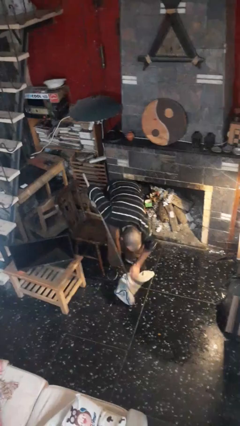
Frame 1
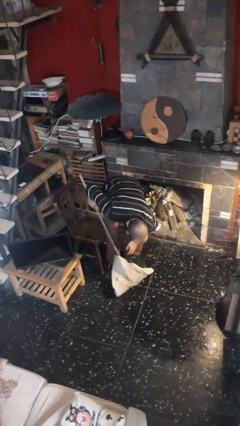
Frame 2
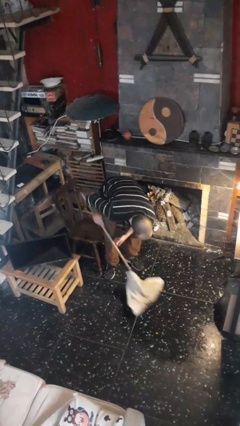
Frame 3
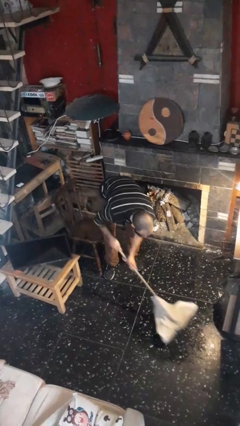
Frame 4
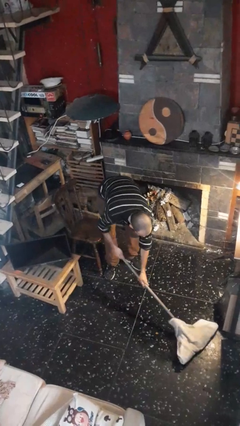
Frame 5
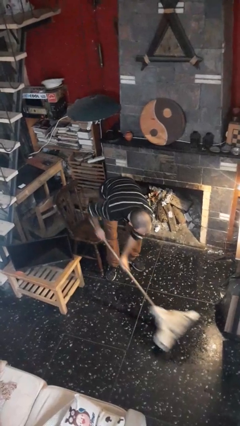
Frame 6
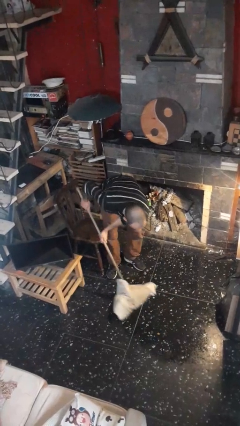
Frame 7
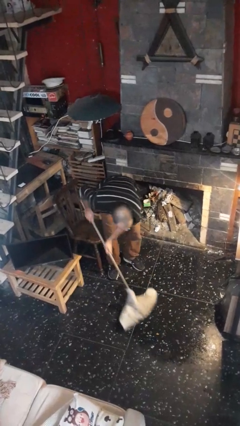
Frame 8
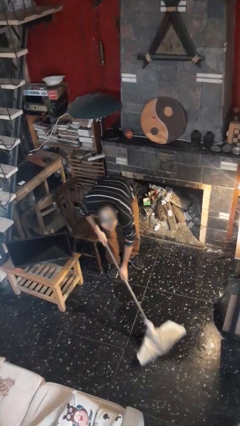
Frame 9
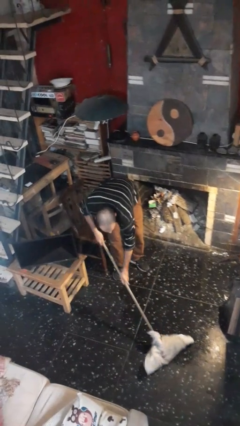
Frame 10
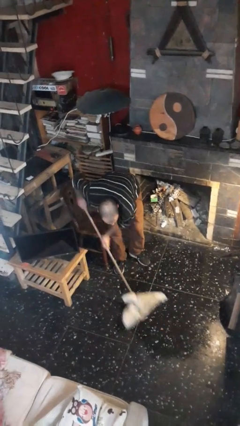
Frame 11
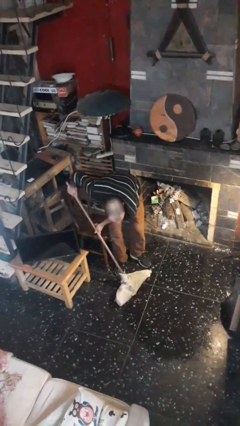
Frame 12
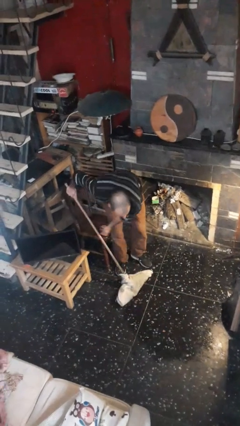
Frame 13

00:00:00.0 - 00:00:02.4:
person mops

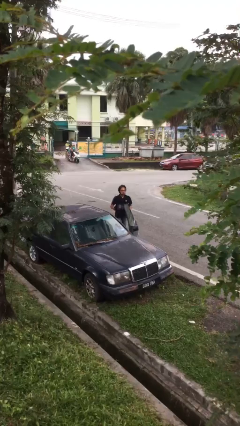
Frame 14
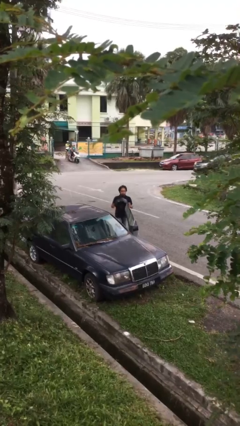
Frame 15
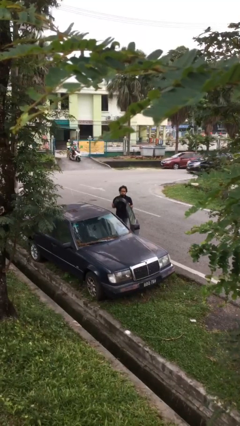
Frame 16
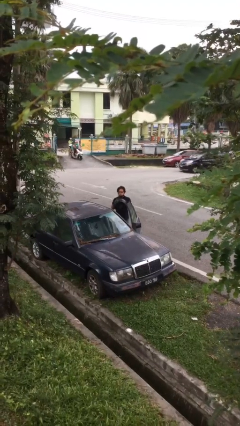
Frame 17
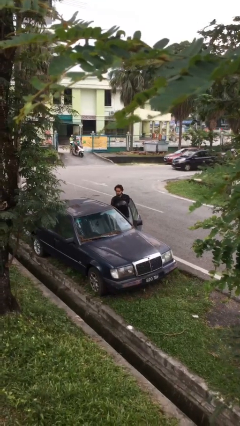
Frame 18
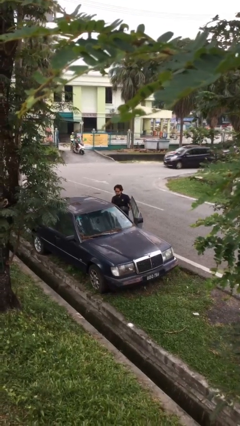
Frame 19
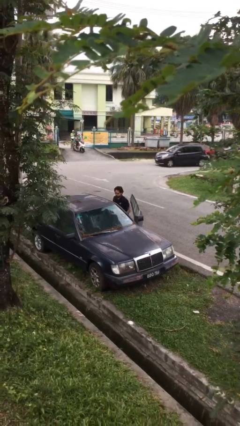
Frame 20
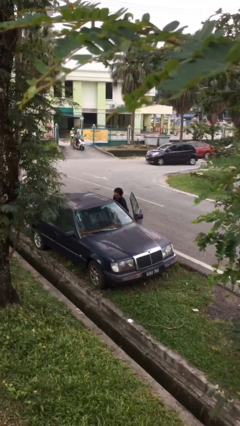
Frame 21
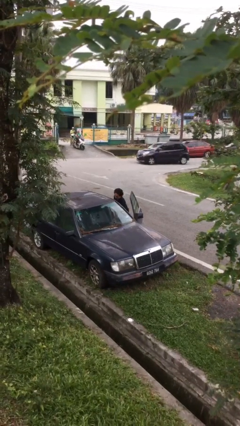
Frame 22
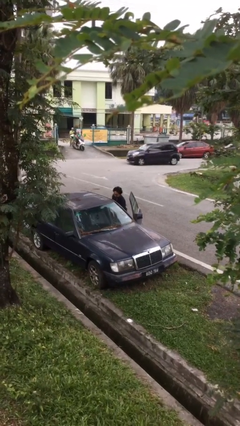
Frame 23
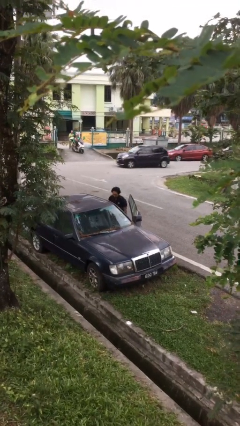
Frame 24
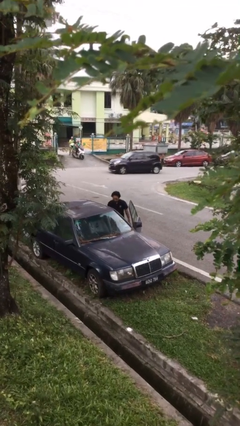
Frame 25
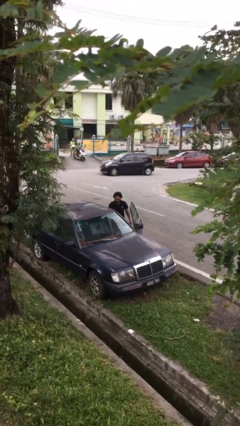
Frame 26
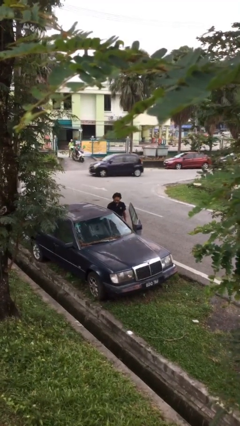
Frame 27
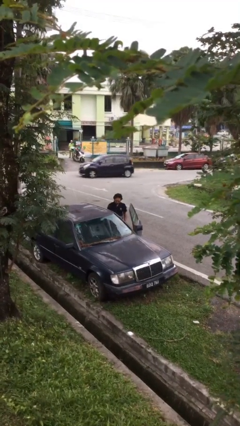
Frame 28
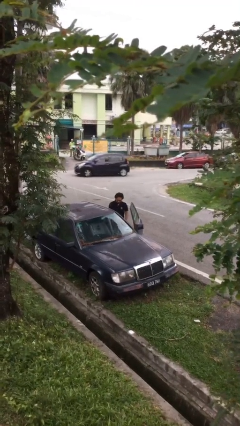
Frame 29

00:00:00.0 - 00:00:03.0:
person loads car

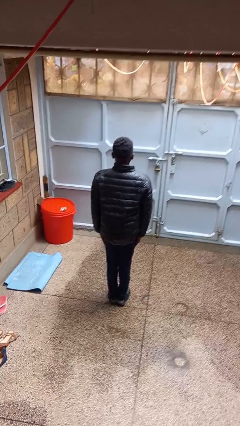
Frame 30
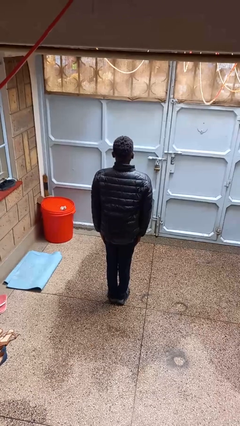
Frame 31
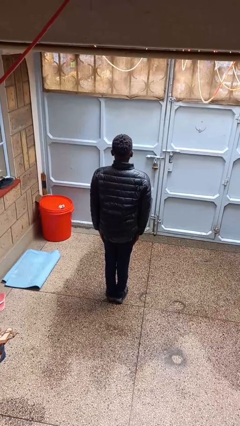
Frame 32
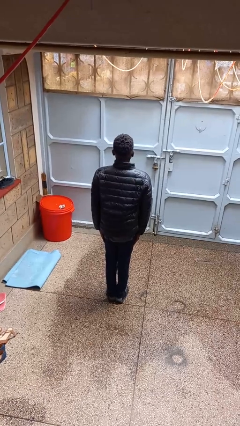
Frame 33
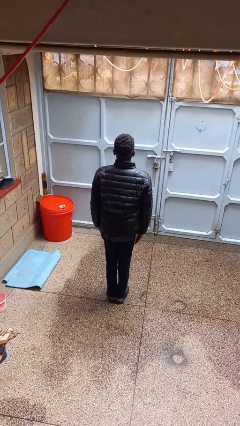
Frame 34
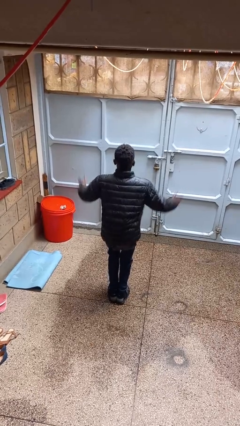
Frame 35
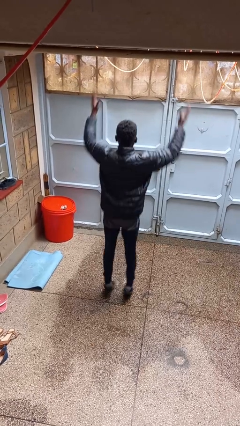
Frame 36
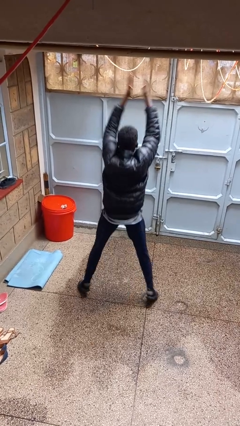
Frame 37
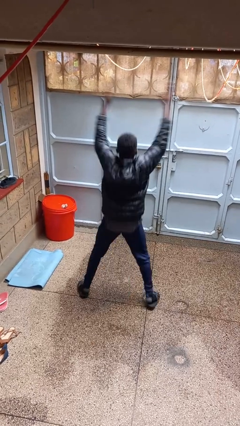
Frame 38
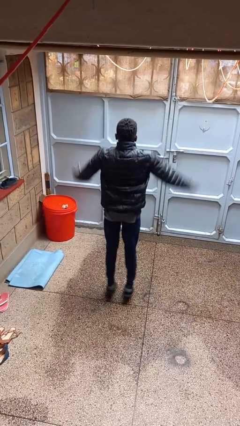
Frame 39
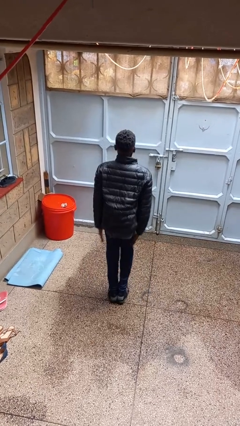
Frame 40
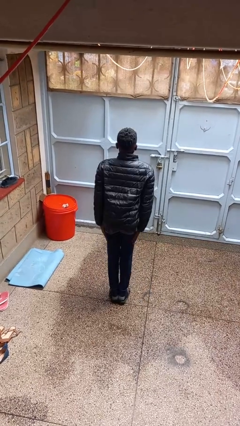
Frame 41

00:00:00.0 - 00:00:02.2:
person exercises with jumping jacks

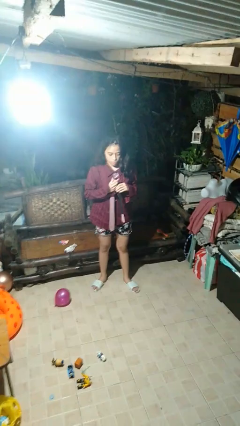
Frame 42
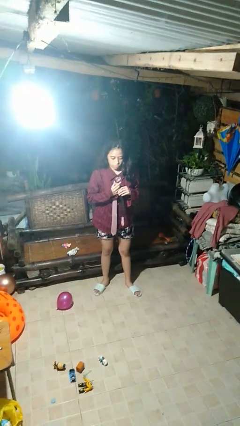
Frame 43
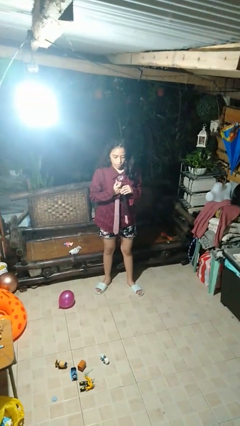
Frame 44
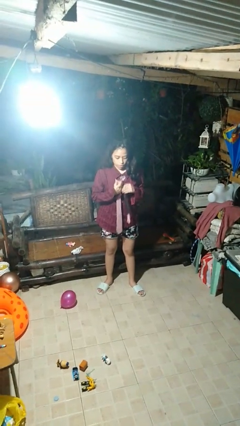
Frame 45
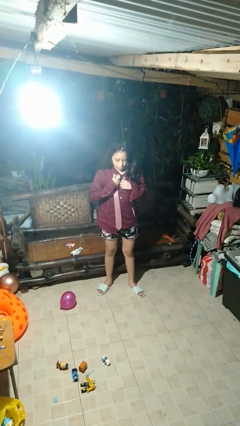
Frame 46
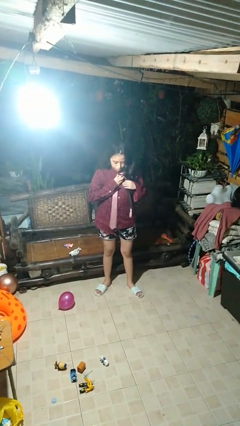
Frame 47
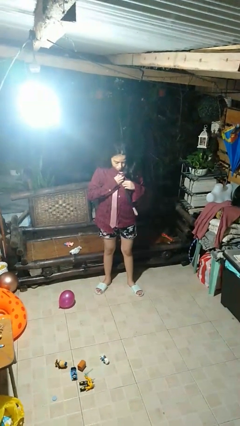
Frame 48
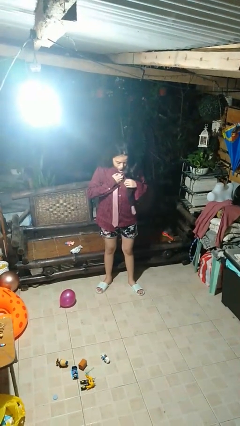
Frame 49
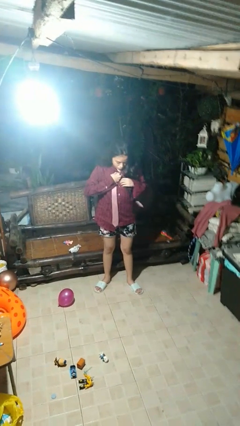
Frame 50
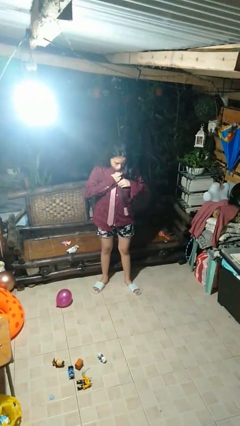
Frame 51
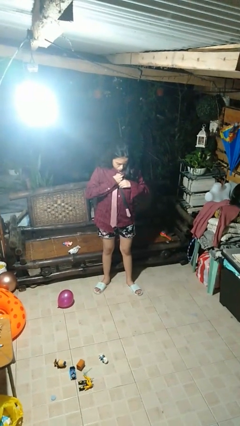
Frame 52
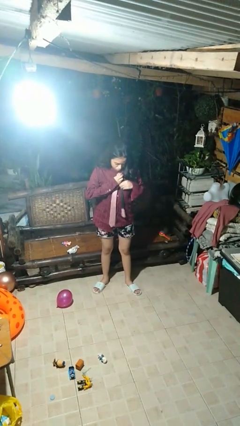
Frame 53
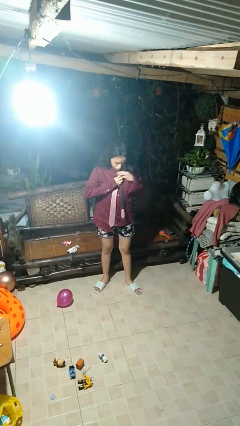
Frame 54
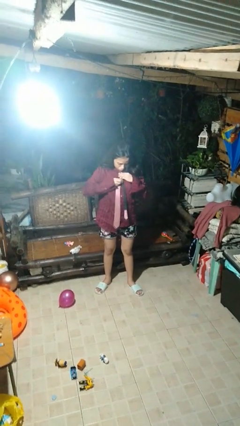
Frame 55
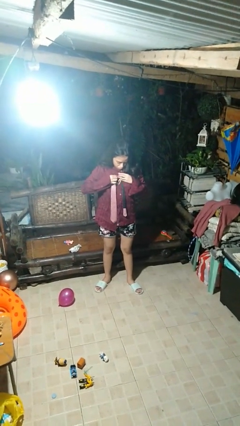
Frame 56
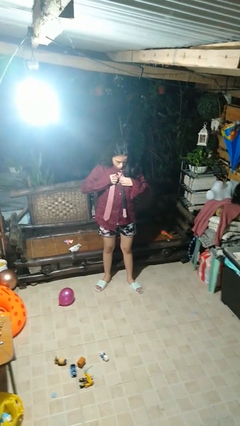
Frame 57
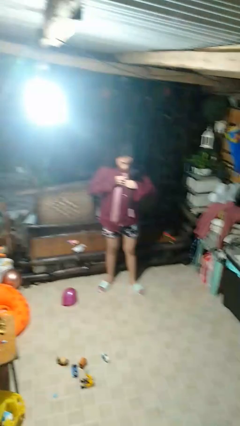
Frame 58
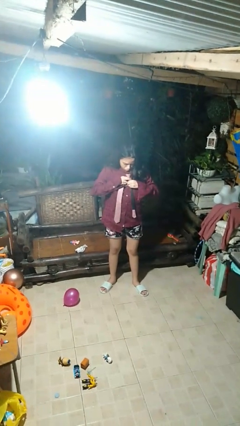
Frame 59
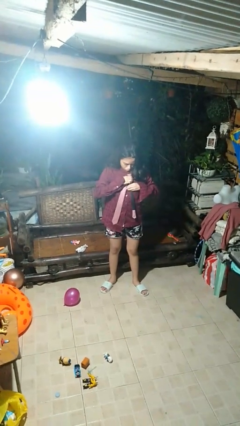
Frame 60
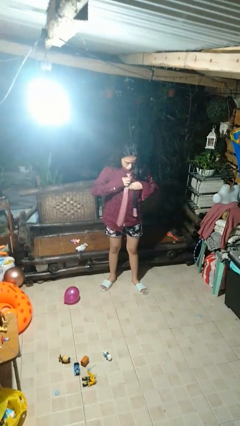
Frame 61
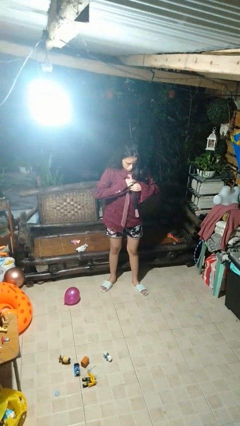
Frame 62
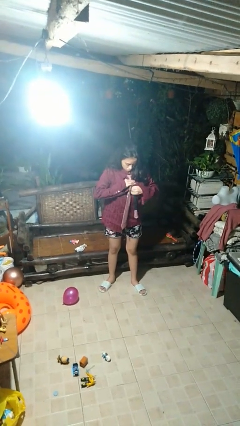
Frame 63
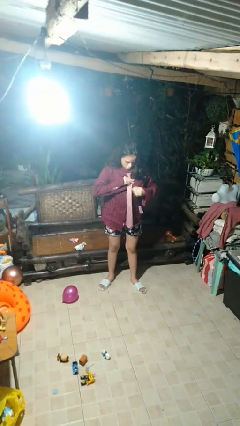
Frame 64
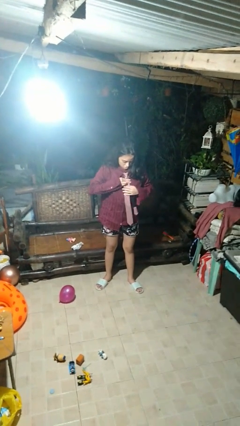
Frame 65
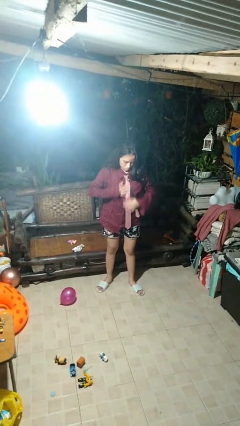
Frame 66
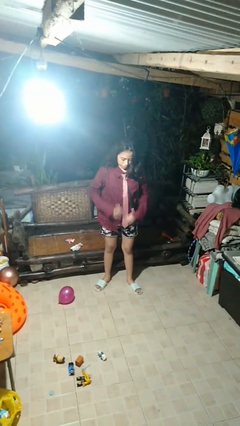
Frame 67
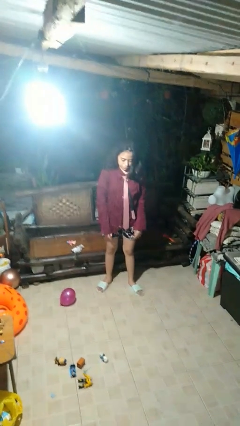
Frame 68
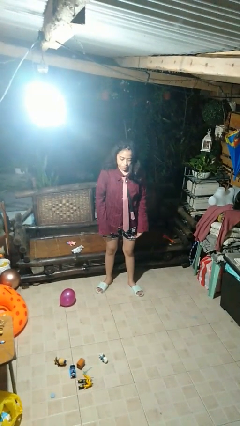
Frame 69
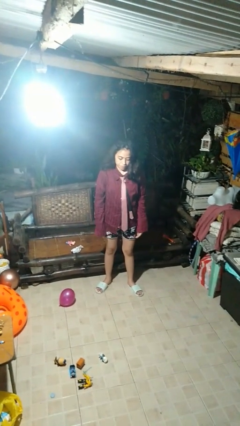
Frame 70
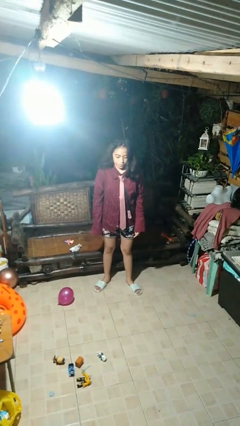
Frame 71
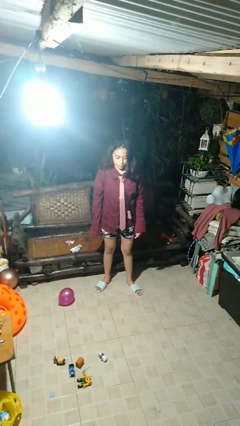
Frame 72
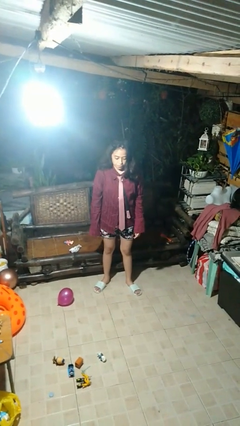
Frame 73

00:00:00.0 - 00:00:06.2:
person puts on necktie

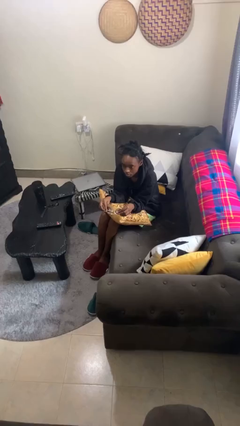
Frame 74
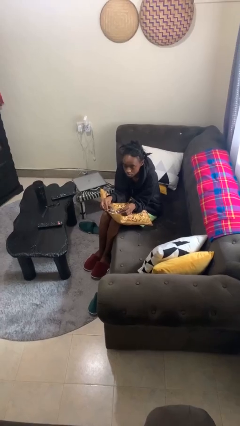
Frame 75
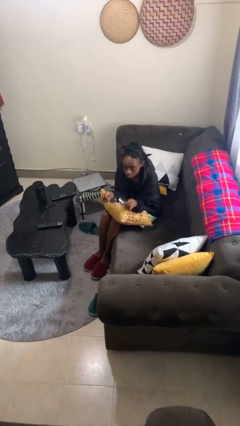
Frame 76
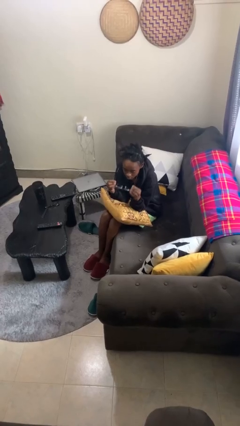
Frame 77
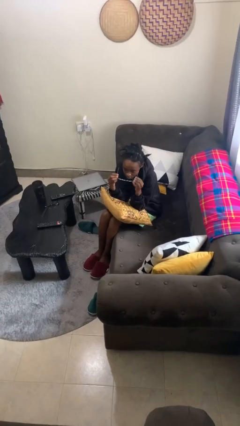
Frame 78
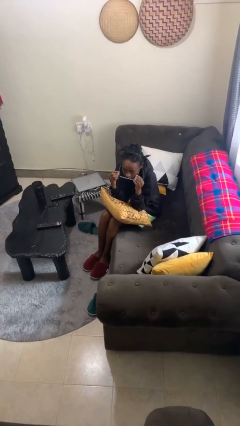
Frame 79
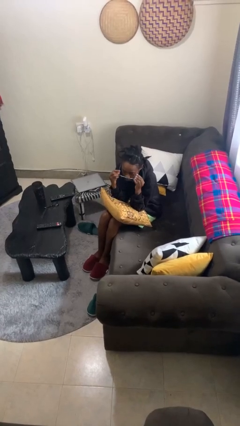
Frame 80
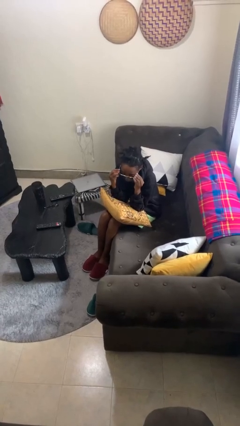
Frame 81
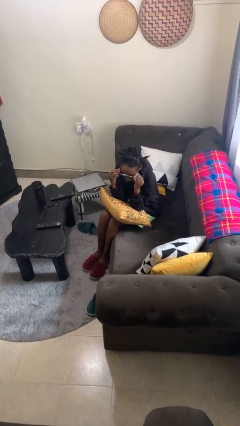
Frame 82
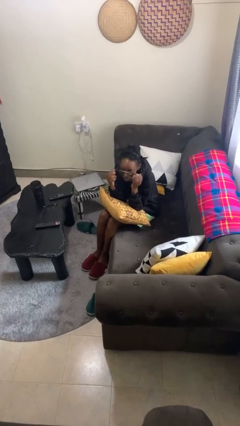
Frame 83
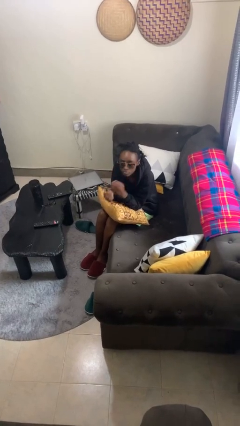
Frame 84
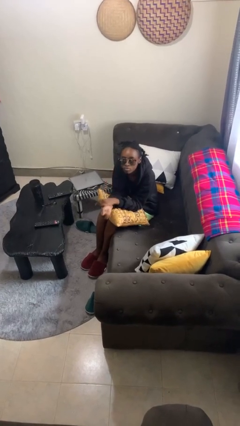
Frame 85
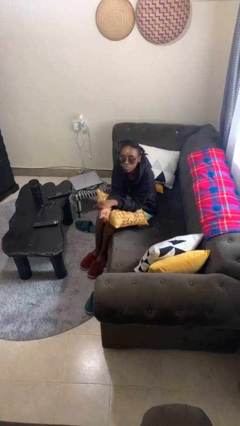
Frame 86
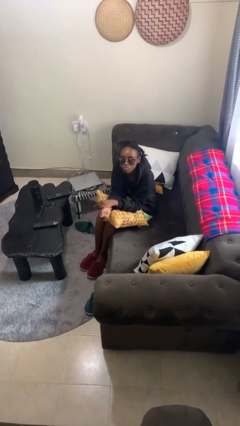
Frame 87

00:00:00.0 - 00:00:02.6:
person puts on sunglasses

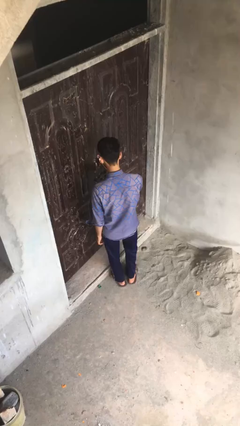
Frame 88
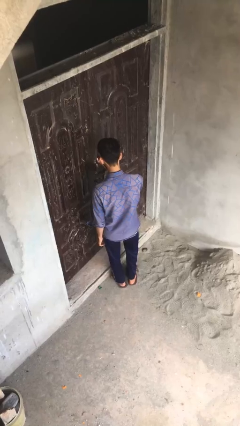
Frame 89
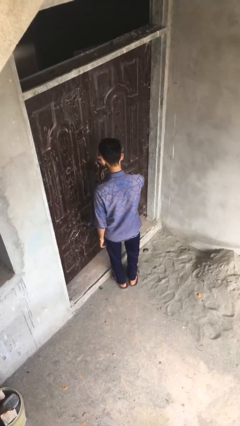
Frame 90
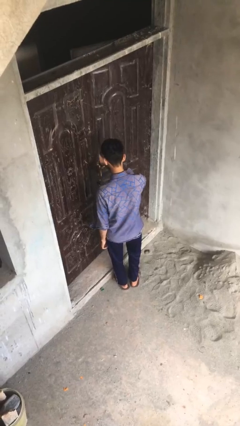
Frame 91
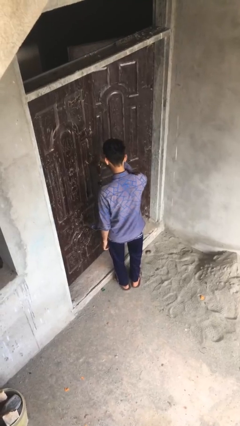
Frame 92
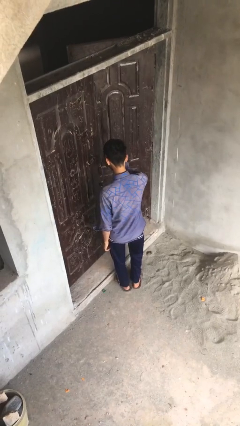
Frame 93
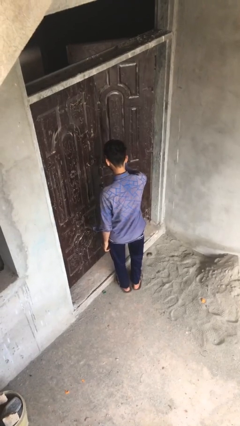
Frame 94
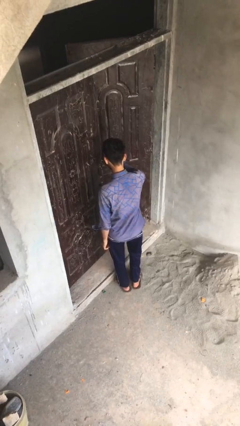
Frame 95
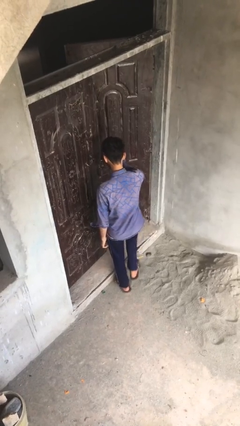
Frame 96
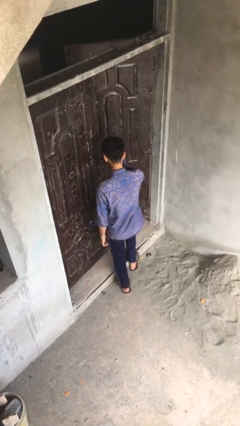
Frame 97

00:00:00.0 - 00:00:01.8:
person opens facility door
